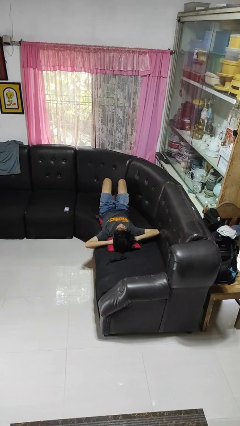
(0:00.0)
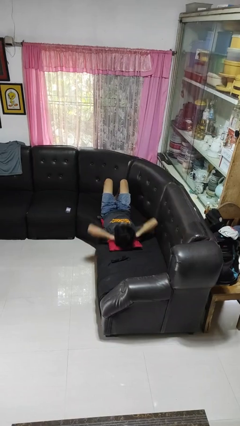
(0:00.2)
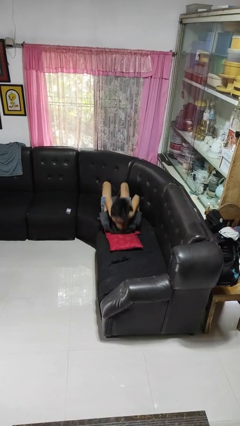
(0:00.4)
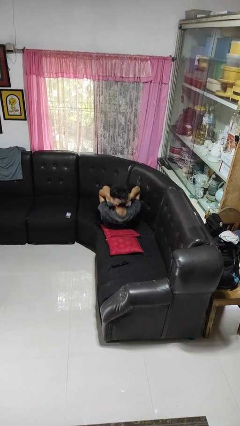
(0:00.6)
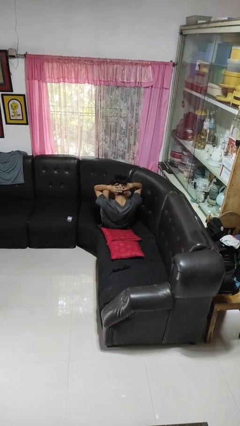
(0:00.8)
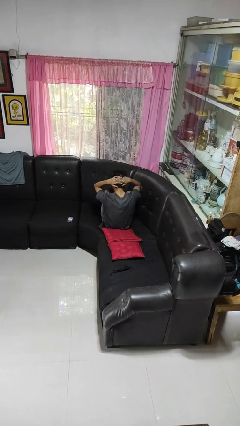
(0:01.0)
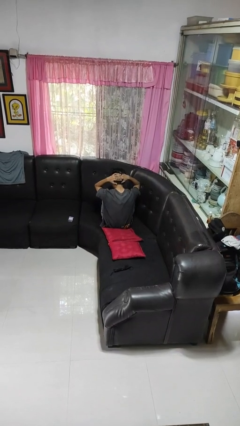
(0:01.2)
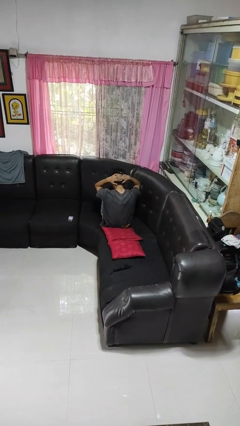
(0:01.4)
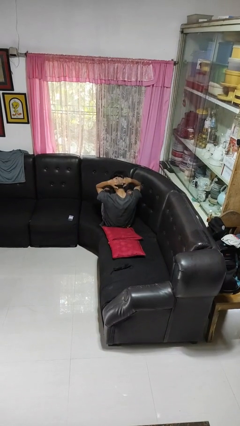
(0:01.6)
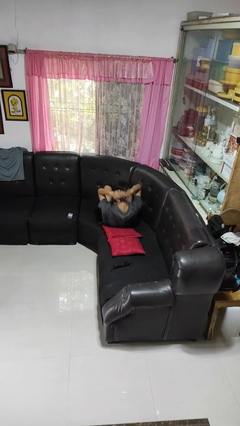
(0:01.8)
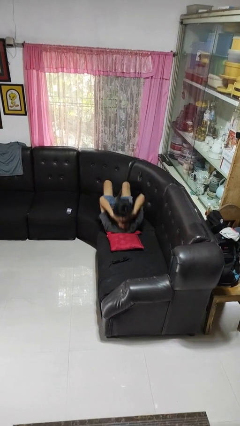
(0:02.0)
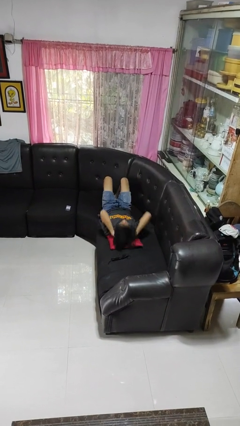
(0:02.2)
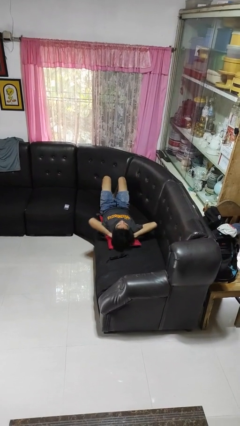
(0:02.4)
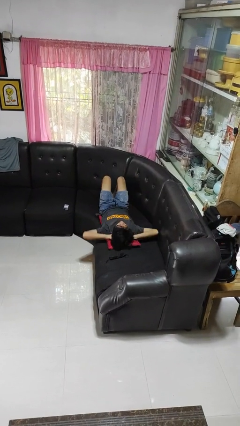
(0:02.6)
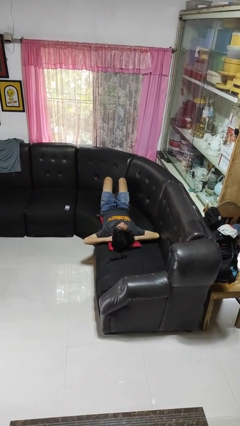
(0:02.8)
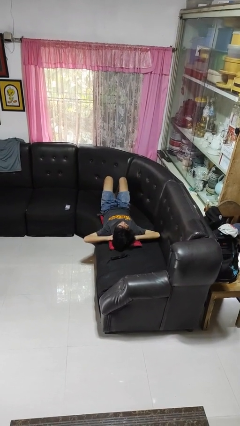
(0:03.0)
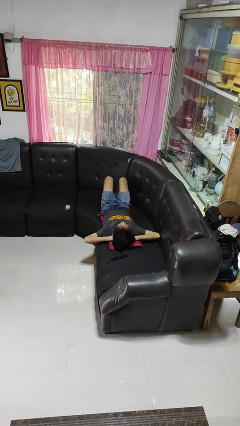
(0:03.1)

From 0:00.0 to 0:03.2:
person exercises with situp

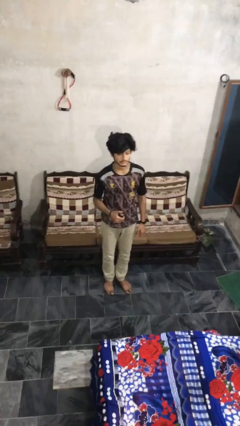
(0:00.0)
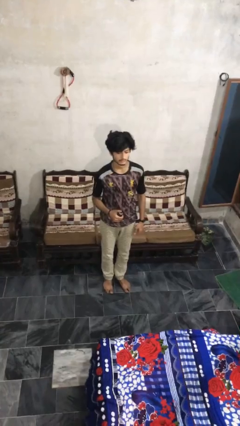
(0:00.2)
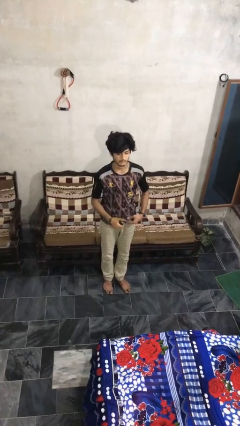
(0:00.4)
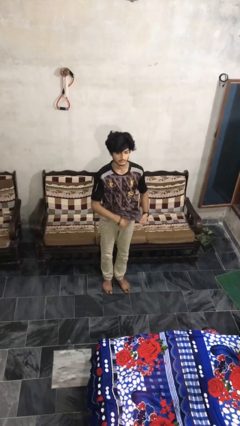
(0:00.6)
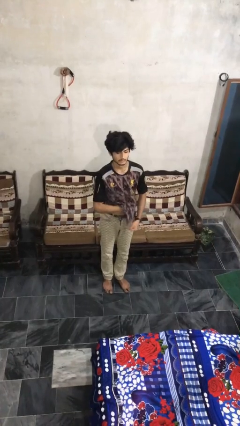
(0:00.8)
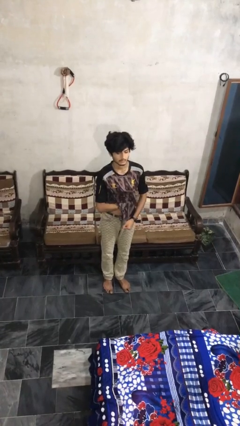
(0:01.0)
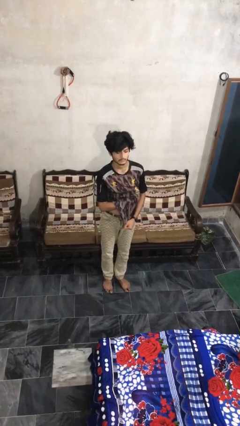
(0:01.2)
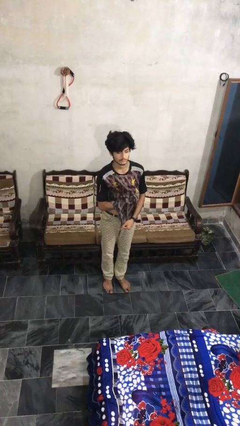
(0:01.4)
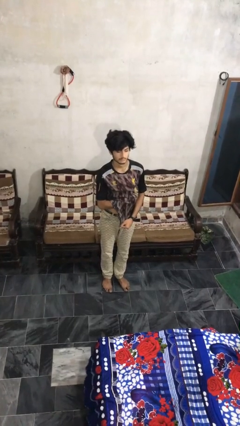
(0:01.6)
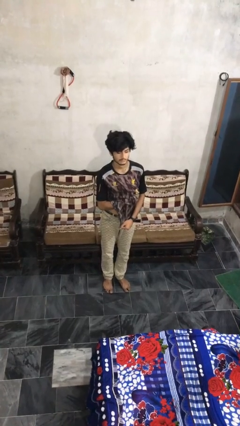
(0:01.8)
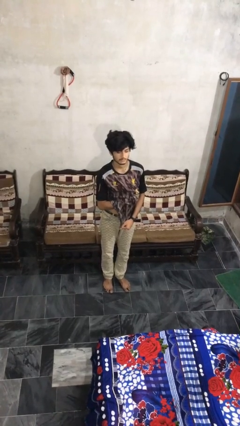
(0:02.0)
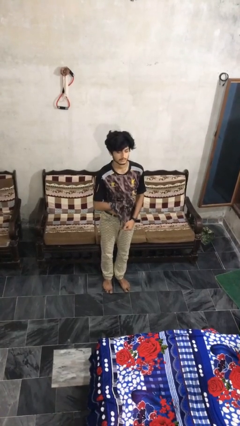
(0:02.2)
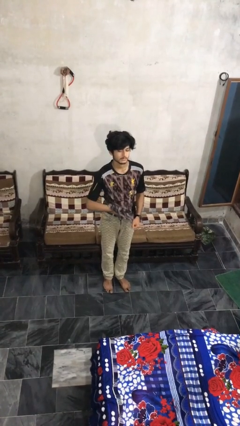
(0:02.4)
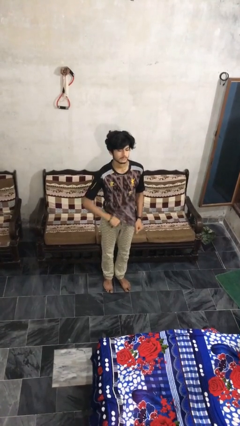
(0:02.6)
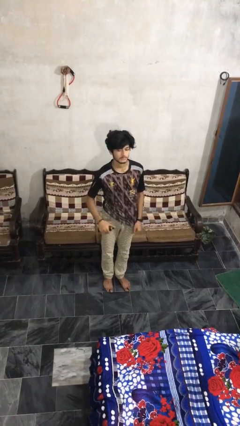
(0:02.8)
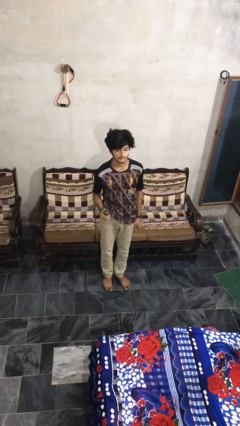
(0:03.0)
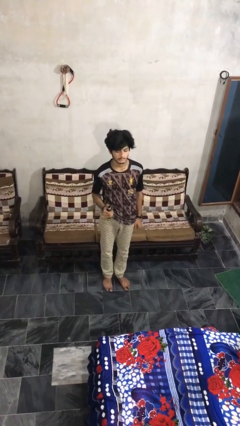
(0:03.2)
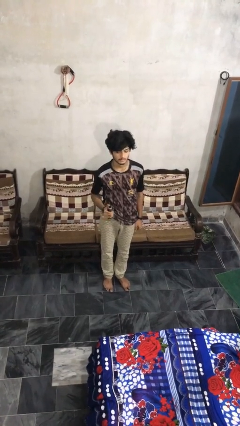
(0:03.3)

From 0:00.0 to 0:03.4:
person applies deodorant

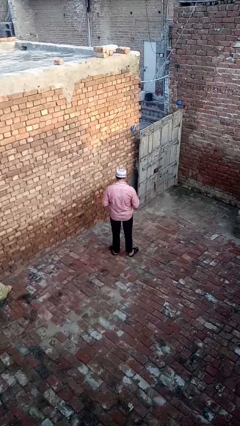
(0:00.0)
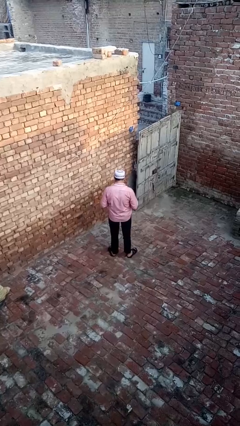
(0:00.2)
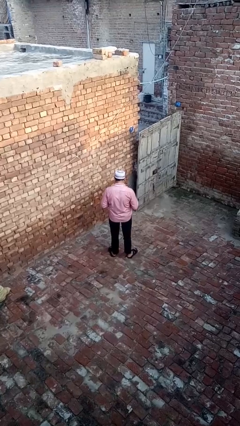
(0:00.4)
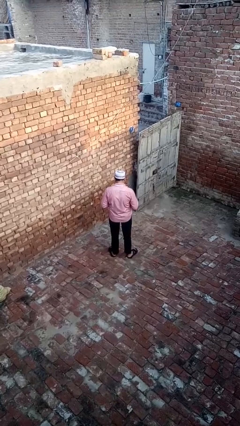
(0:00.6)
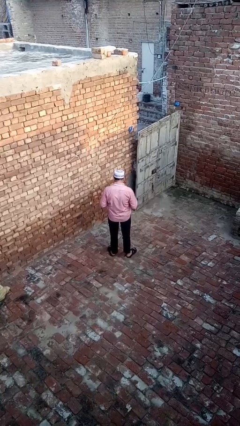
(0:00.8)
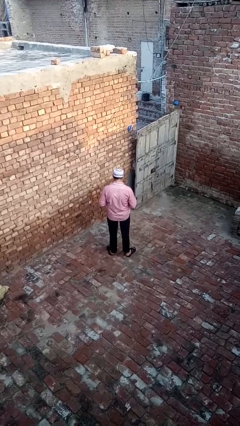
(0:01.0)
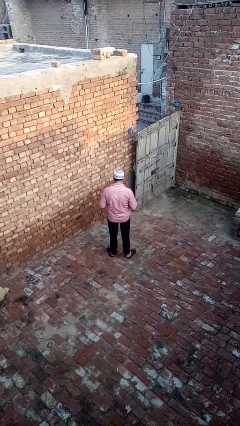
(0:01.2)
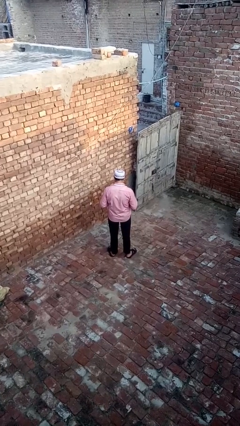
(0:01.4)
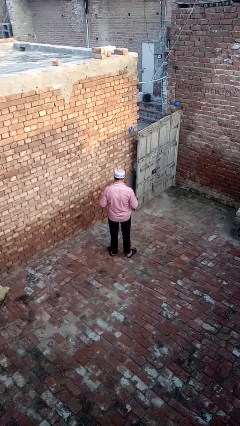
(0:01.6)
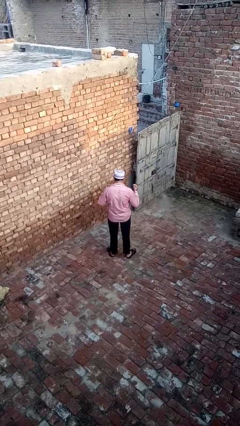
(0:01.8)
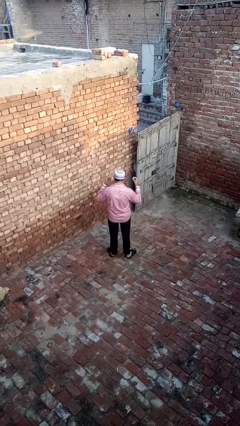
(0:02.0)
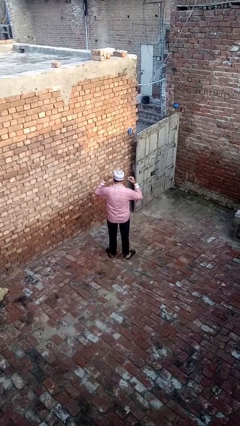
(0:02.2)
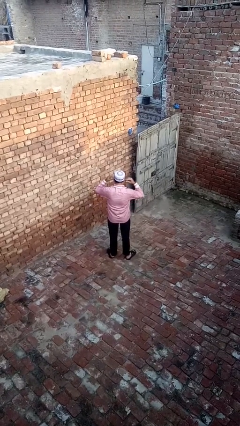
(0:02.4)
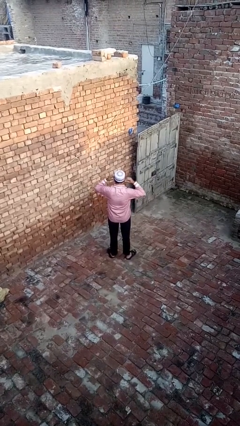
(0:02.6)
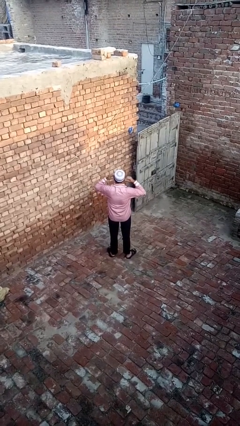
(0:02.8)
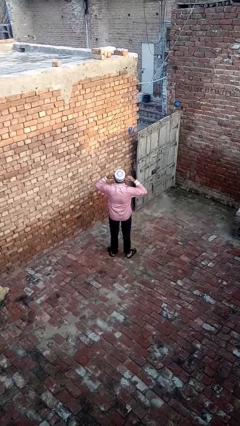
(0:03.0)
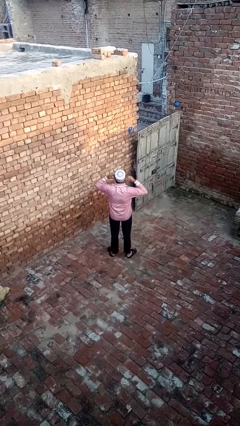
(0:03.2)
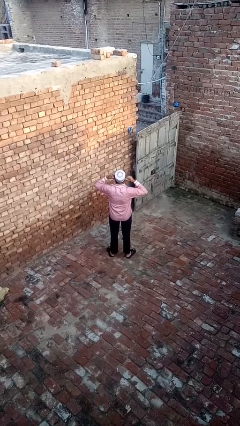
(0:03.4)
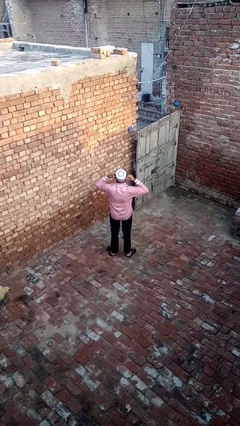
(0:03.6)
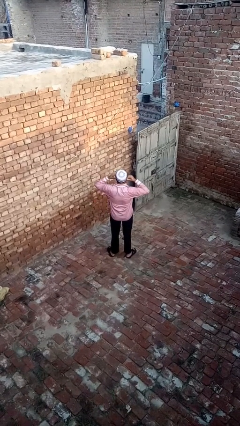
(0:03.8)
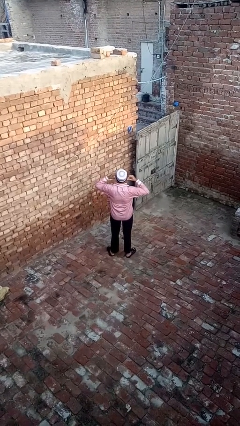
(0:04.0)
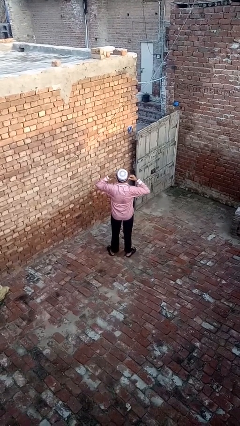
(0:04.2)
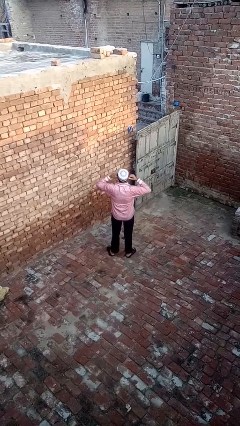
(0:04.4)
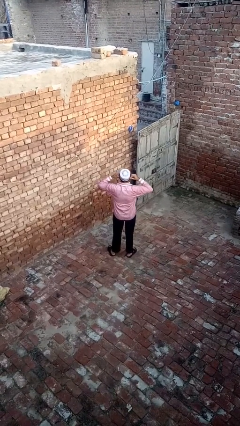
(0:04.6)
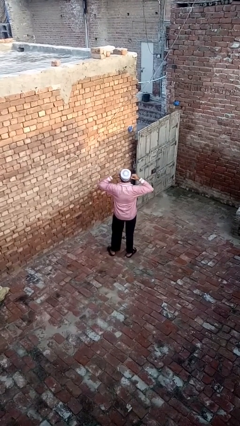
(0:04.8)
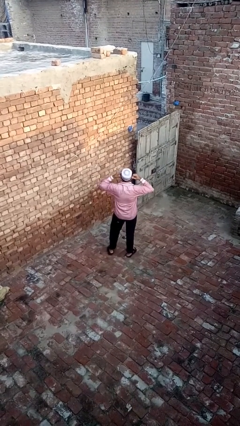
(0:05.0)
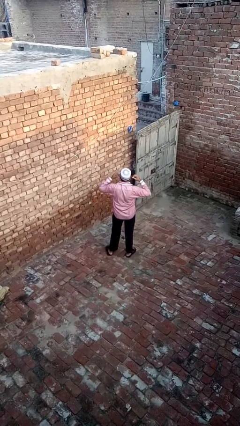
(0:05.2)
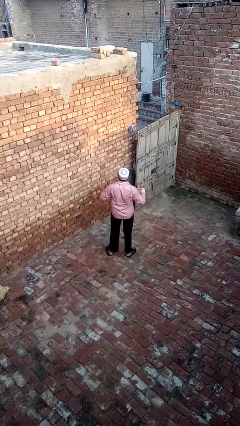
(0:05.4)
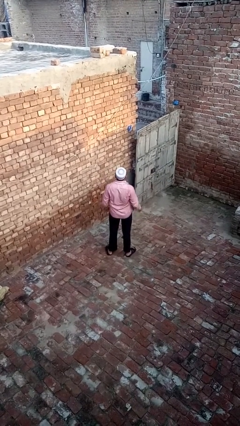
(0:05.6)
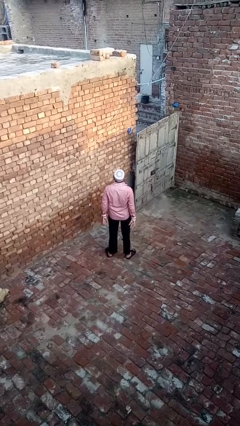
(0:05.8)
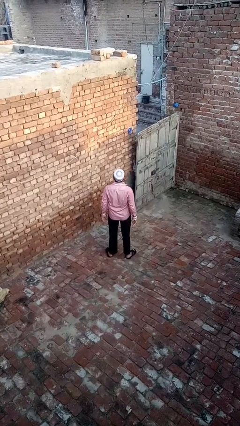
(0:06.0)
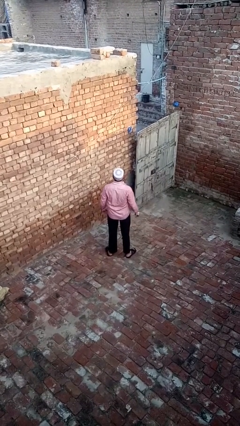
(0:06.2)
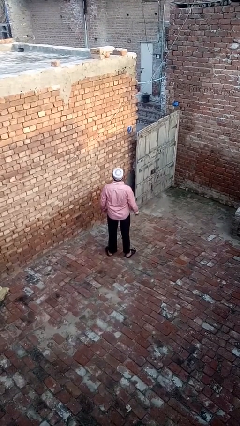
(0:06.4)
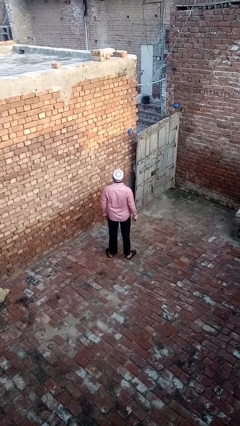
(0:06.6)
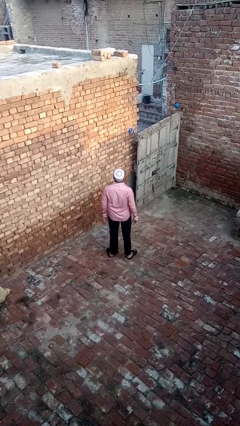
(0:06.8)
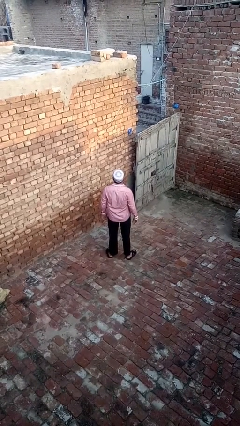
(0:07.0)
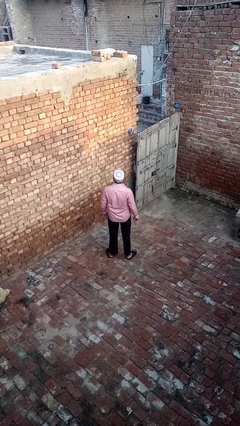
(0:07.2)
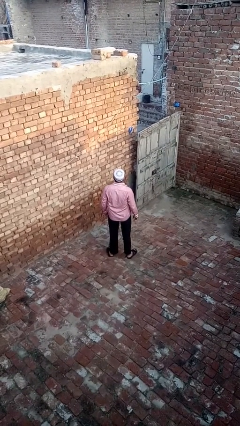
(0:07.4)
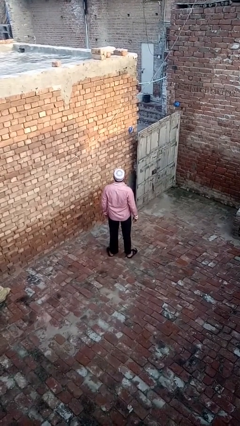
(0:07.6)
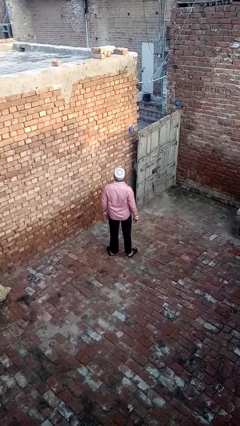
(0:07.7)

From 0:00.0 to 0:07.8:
person puts on headphones

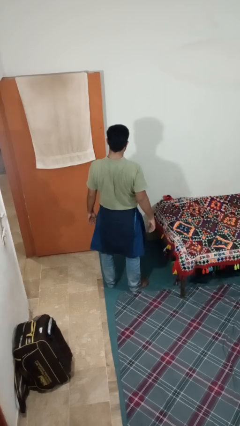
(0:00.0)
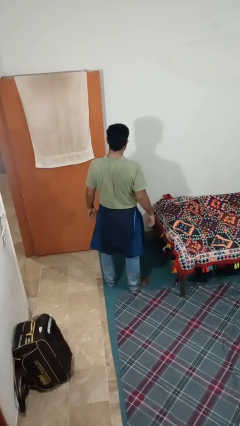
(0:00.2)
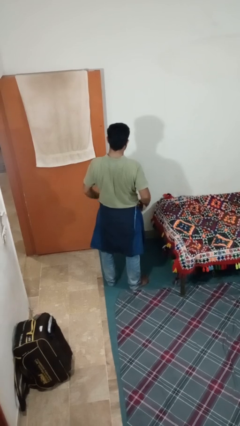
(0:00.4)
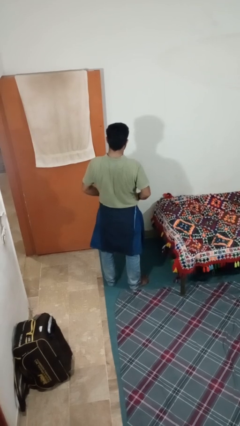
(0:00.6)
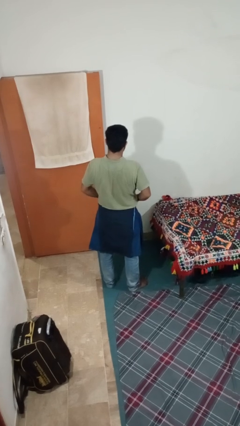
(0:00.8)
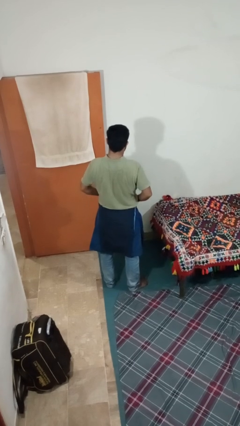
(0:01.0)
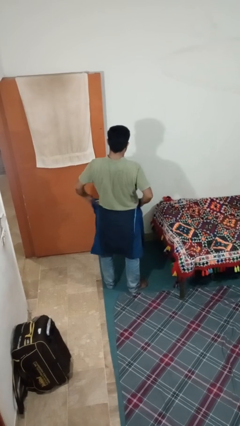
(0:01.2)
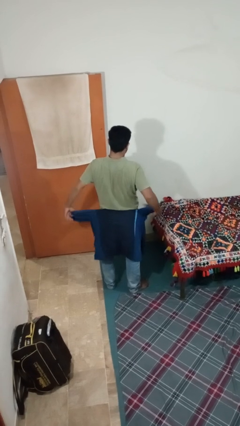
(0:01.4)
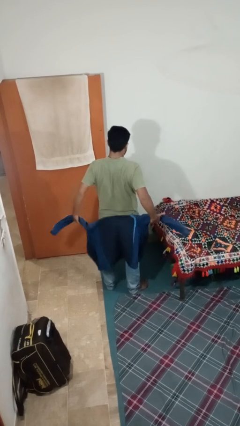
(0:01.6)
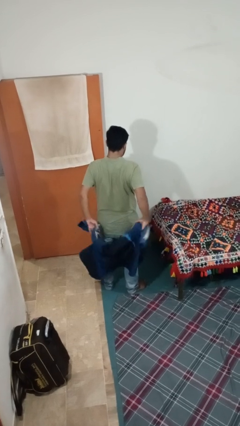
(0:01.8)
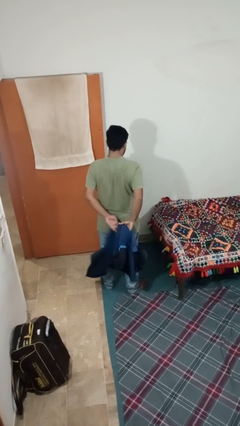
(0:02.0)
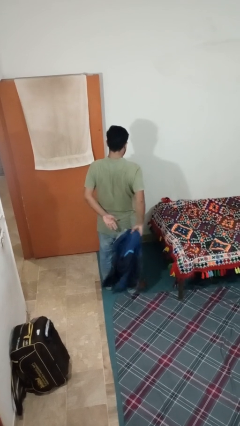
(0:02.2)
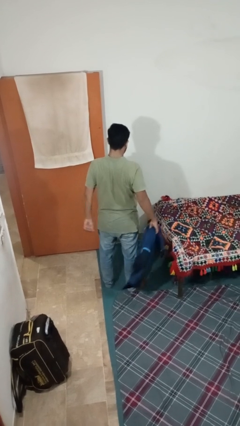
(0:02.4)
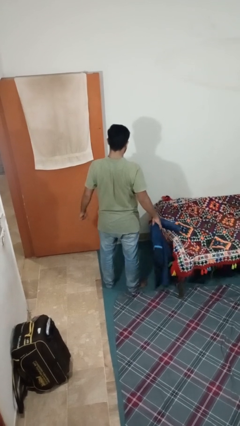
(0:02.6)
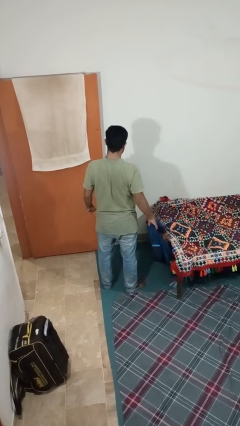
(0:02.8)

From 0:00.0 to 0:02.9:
person unties jacket around waist

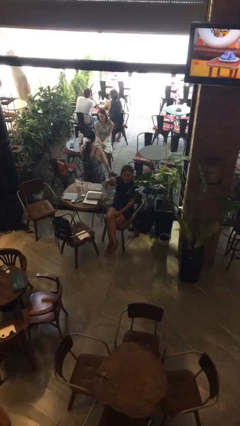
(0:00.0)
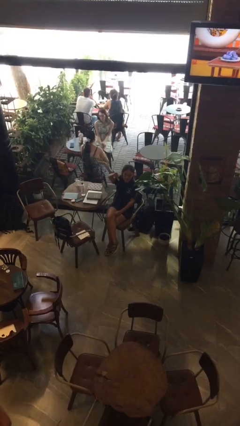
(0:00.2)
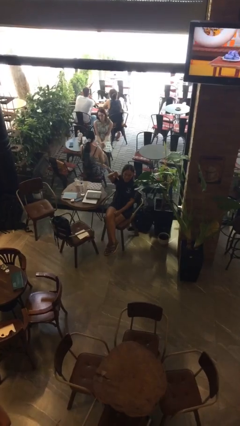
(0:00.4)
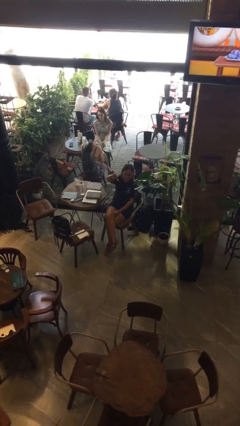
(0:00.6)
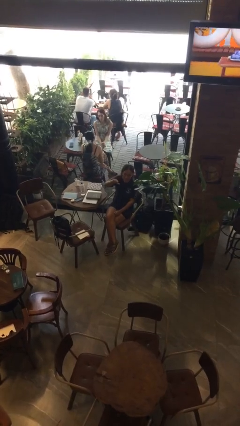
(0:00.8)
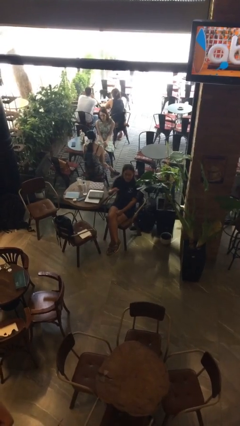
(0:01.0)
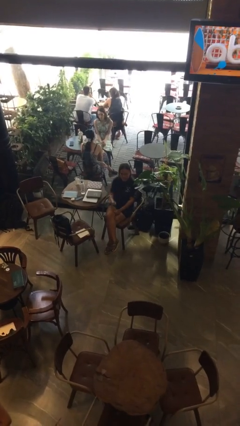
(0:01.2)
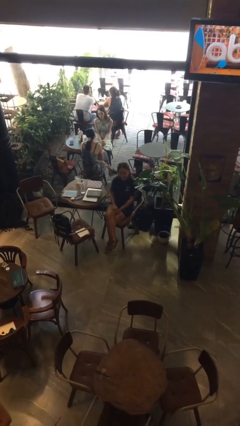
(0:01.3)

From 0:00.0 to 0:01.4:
person gestures thumbs down
